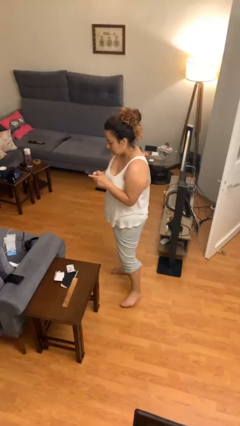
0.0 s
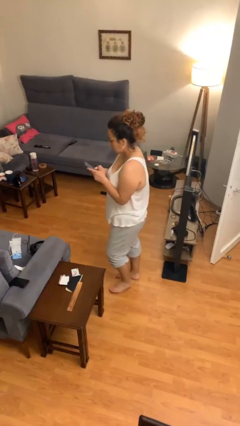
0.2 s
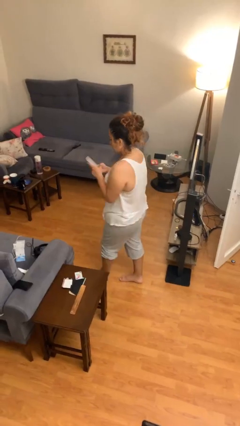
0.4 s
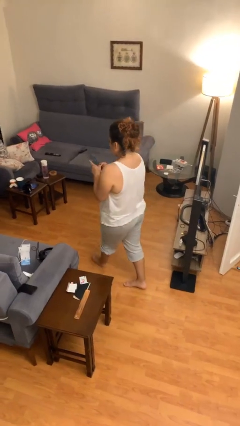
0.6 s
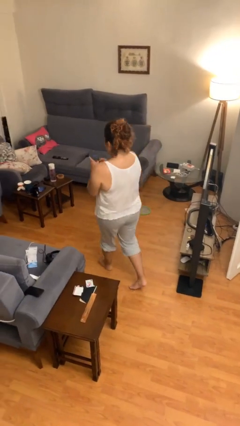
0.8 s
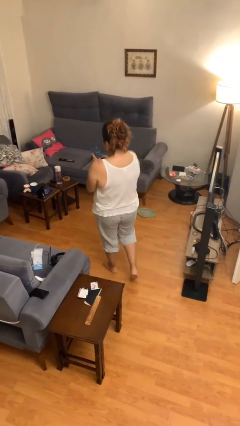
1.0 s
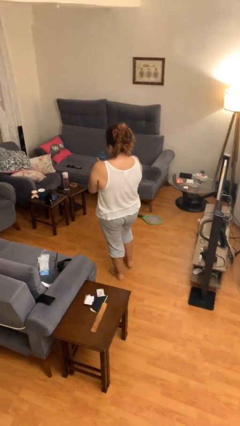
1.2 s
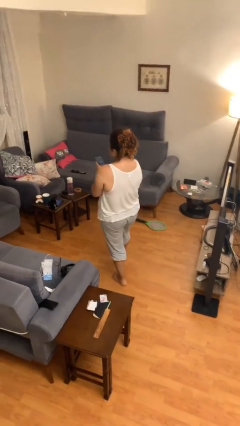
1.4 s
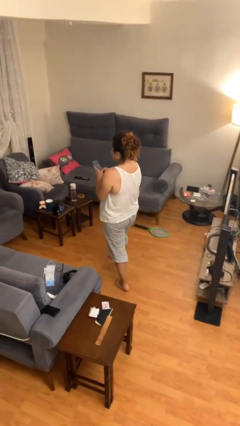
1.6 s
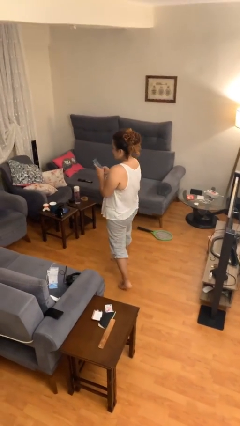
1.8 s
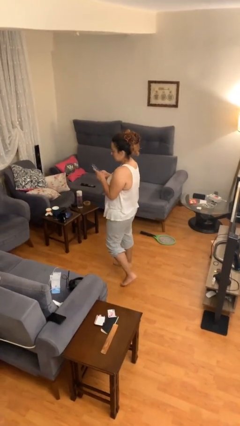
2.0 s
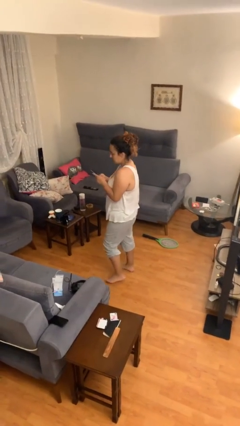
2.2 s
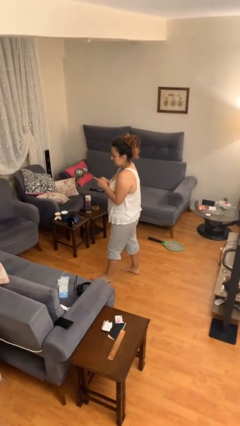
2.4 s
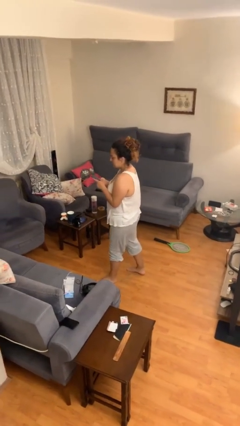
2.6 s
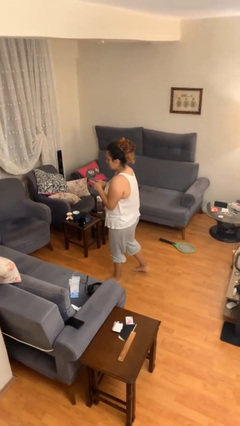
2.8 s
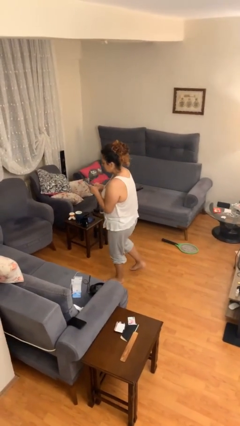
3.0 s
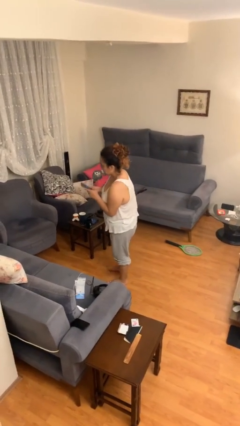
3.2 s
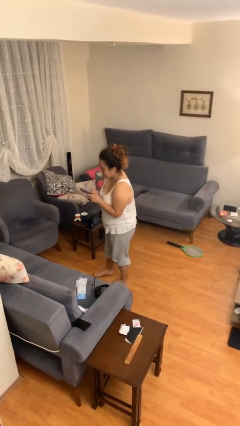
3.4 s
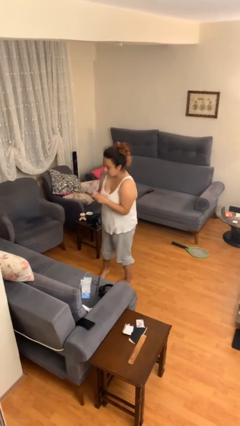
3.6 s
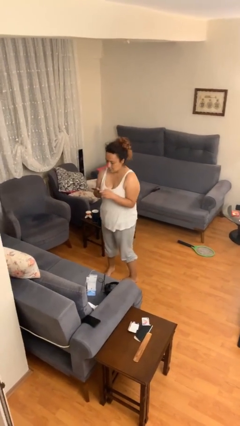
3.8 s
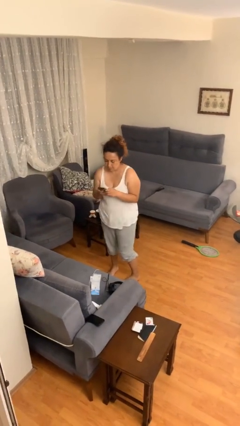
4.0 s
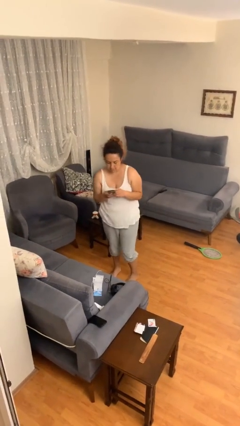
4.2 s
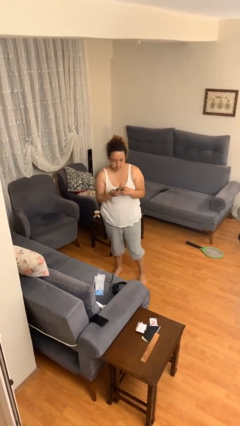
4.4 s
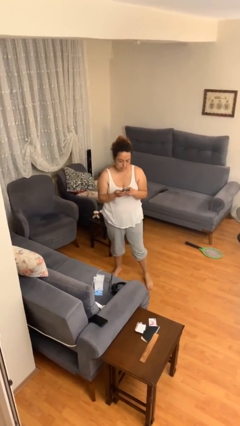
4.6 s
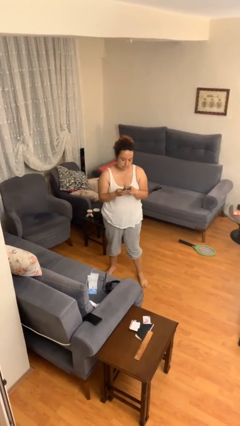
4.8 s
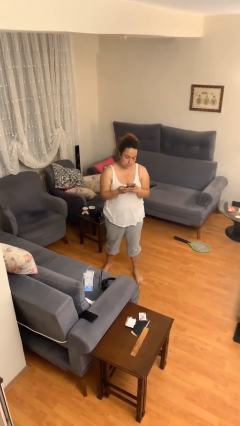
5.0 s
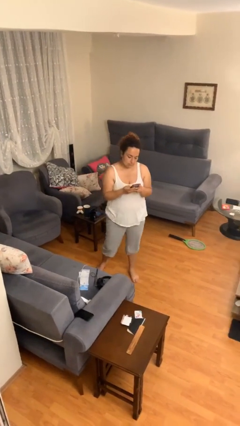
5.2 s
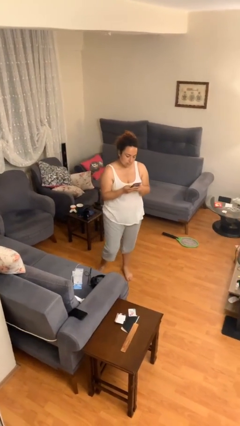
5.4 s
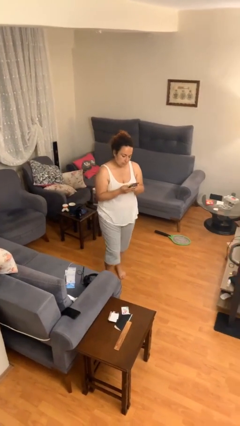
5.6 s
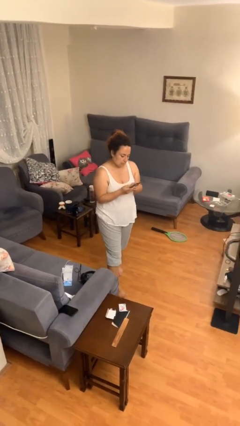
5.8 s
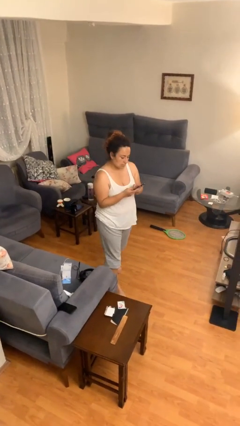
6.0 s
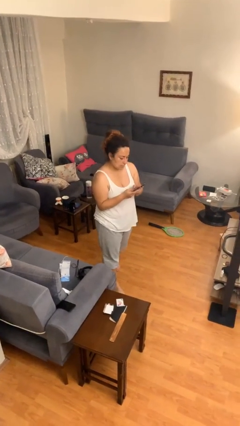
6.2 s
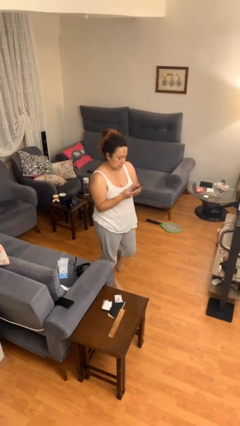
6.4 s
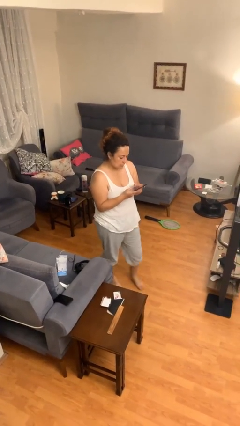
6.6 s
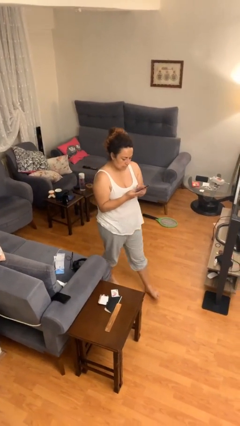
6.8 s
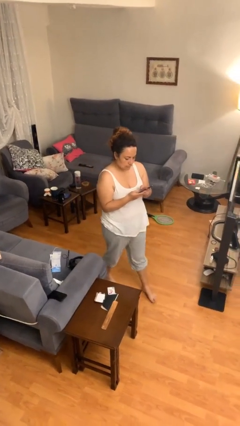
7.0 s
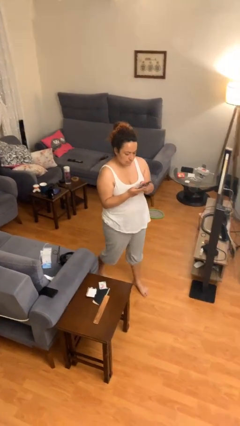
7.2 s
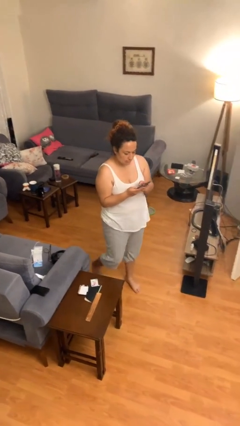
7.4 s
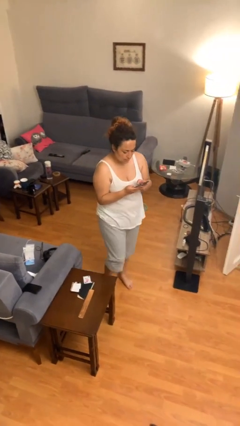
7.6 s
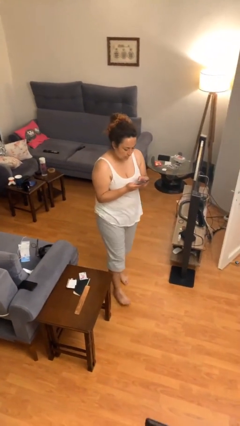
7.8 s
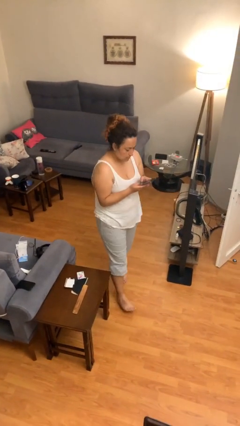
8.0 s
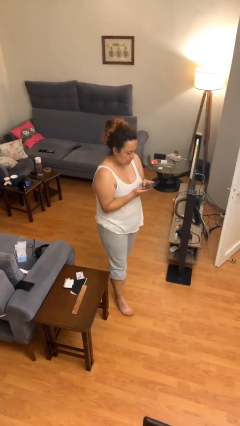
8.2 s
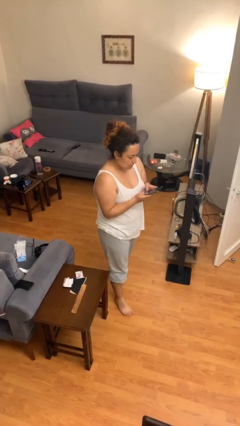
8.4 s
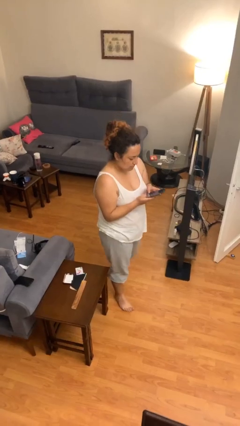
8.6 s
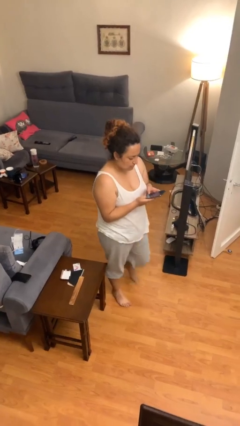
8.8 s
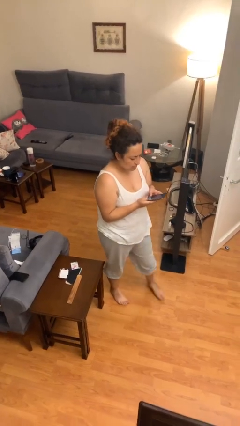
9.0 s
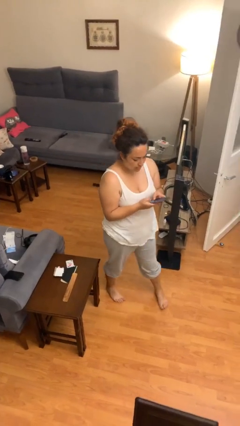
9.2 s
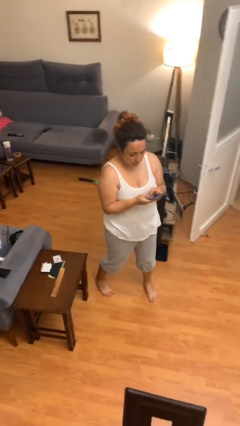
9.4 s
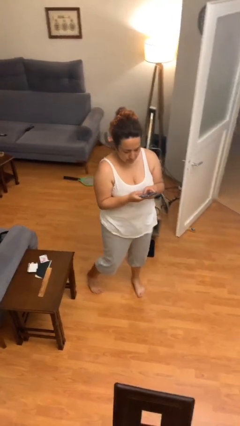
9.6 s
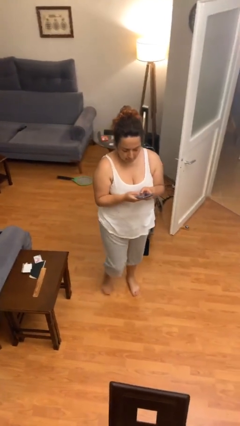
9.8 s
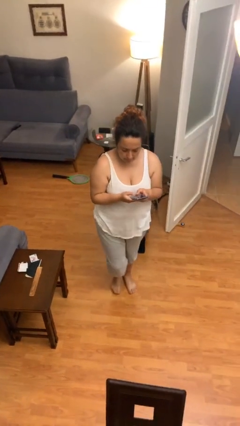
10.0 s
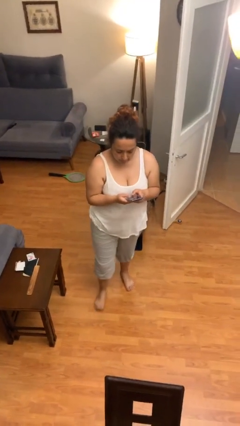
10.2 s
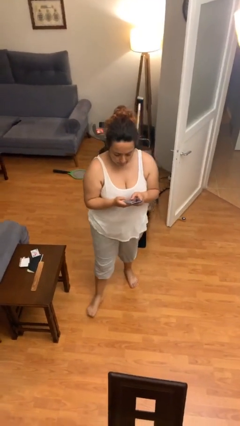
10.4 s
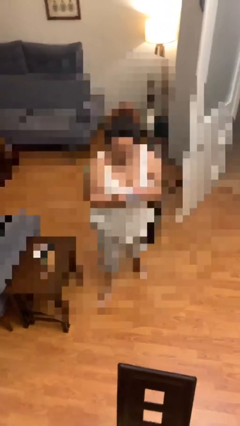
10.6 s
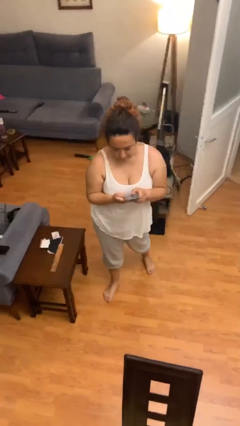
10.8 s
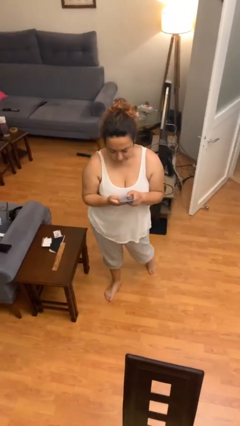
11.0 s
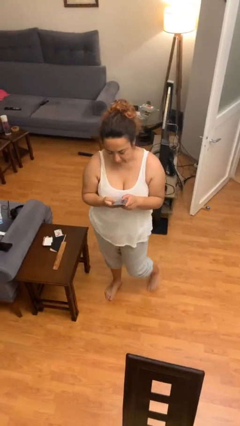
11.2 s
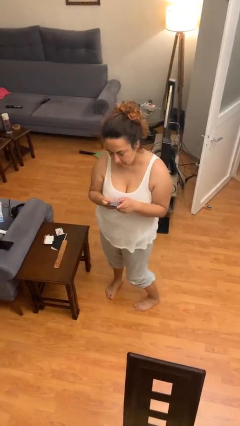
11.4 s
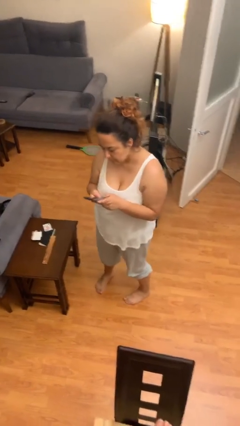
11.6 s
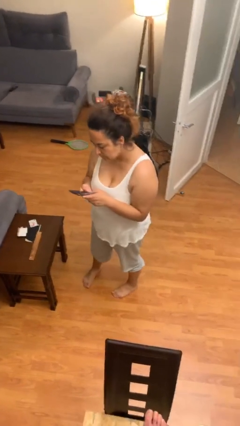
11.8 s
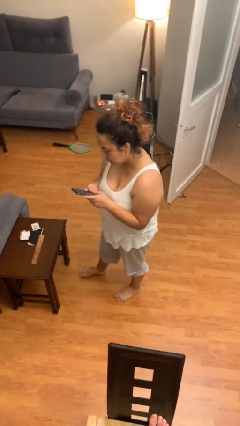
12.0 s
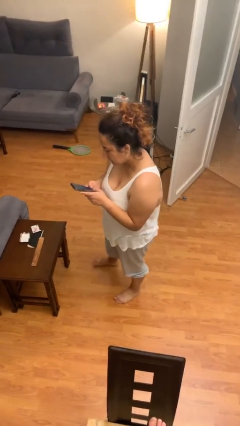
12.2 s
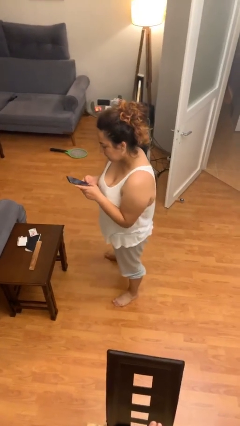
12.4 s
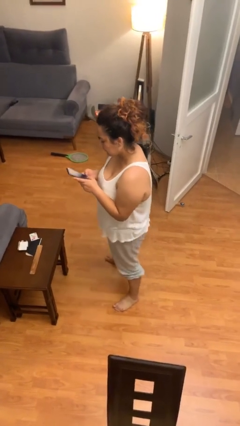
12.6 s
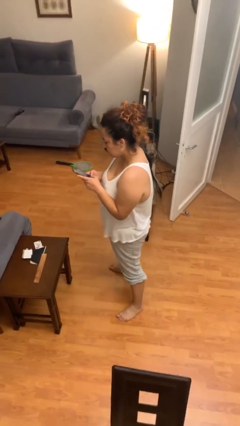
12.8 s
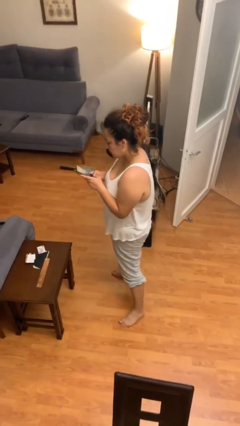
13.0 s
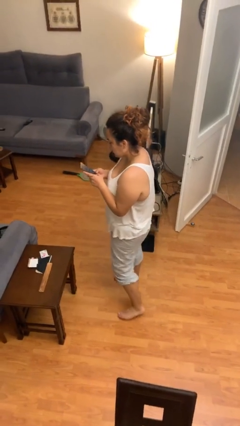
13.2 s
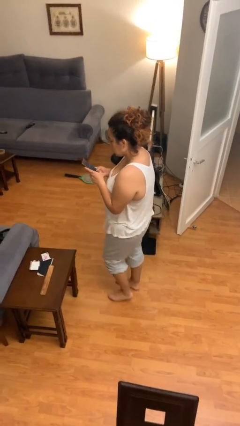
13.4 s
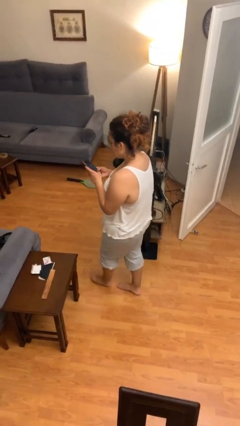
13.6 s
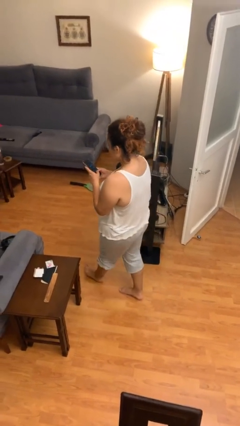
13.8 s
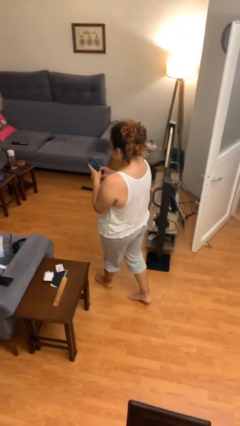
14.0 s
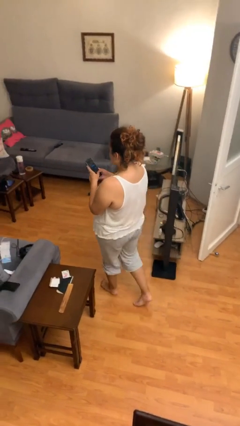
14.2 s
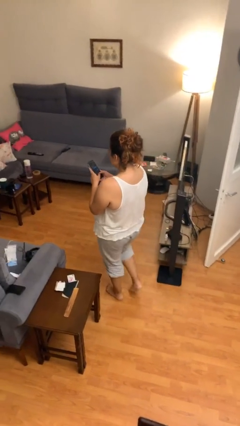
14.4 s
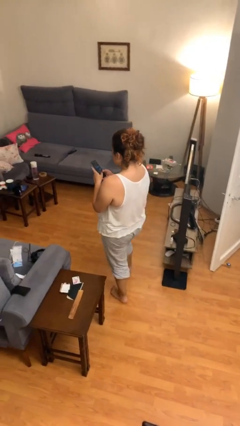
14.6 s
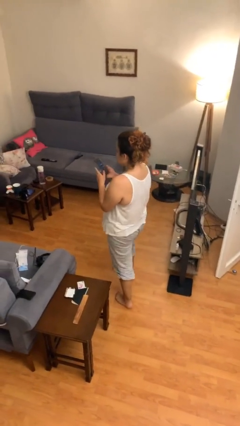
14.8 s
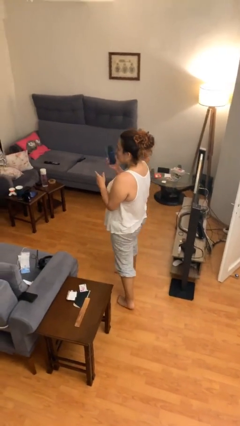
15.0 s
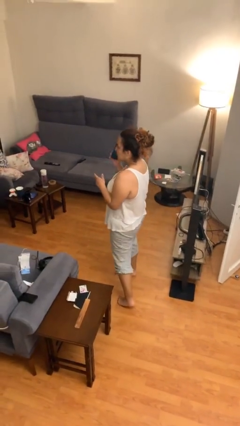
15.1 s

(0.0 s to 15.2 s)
person texts on phone

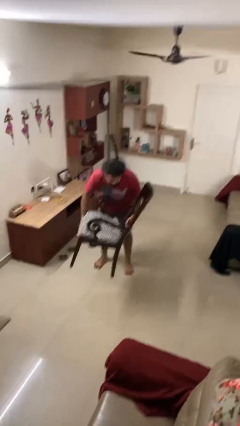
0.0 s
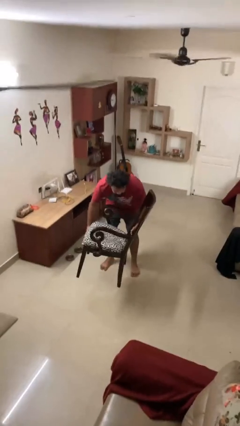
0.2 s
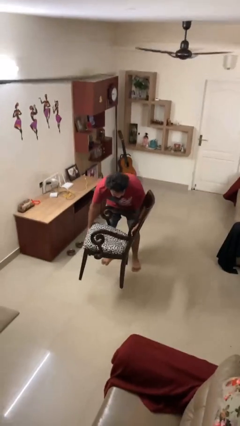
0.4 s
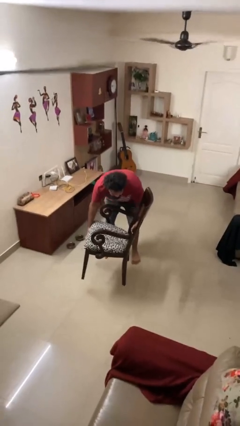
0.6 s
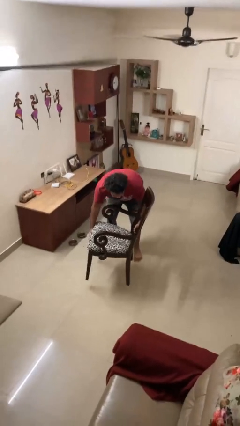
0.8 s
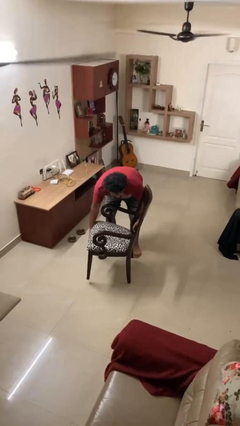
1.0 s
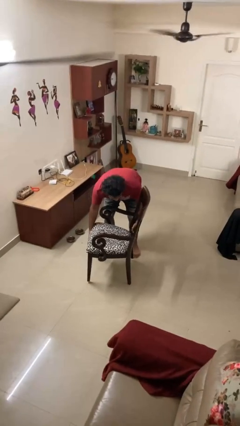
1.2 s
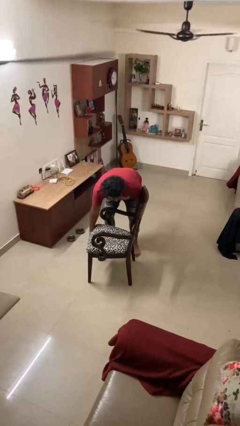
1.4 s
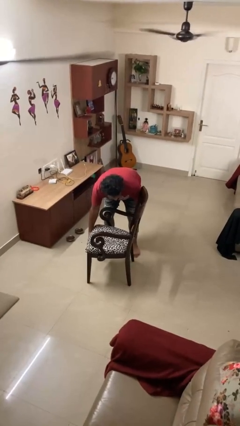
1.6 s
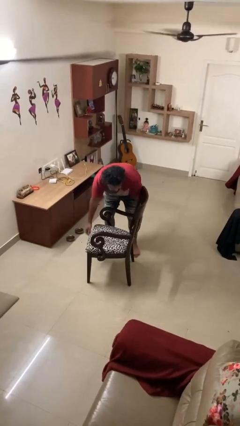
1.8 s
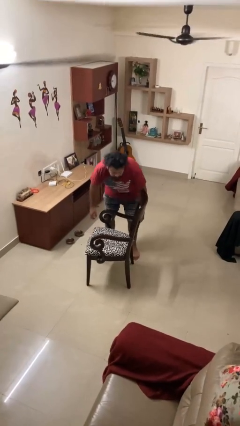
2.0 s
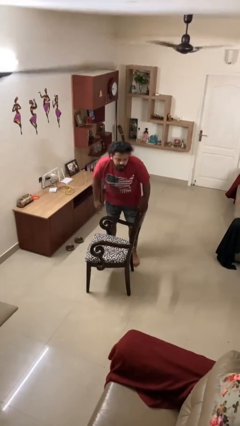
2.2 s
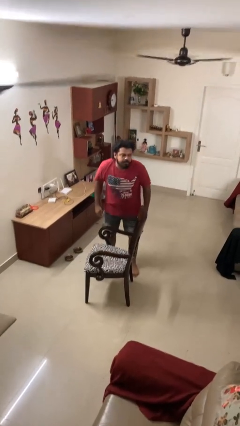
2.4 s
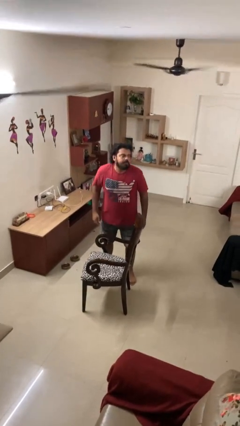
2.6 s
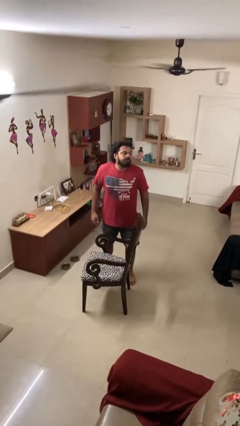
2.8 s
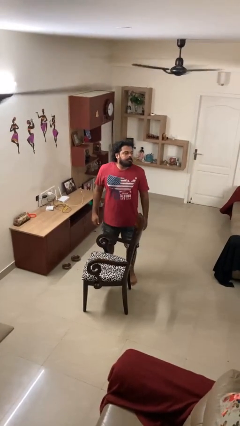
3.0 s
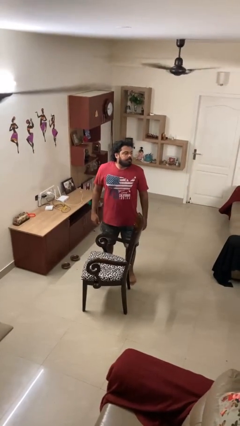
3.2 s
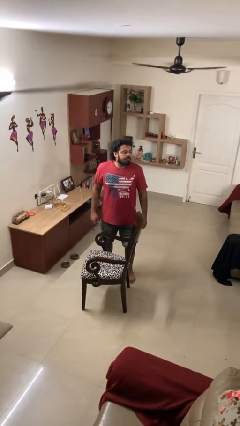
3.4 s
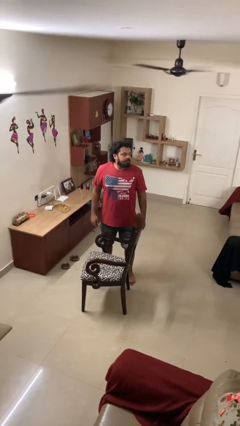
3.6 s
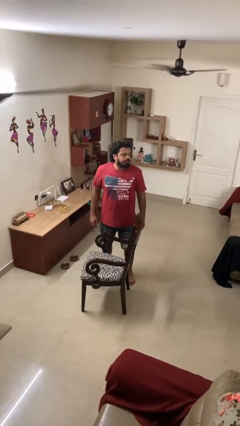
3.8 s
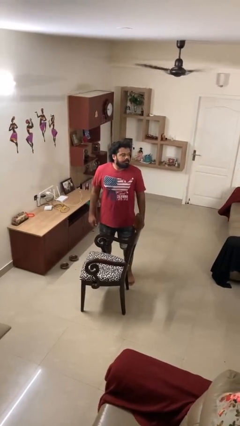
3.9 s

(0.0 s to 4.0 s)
person puts down object on floor
